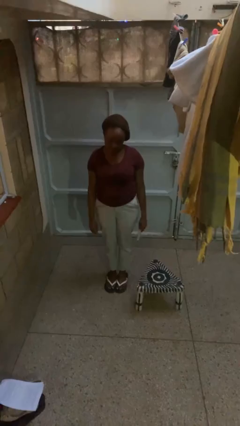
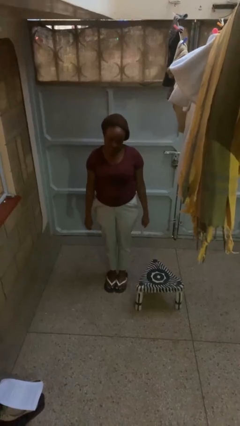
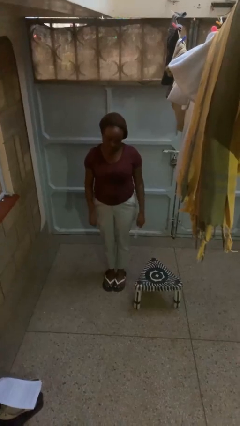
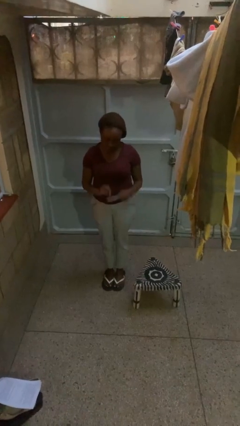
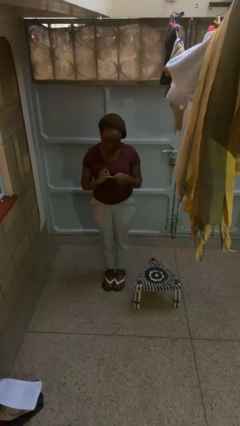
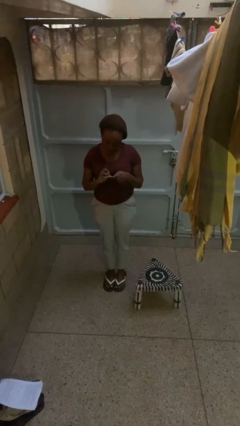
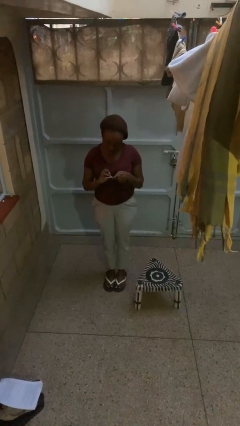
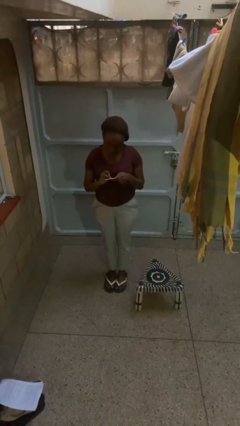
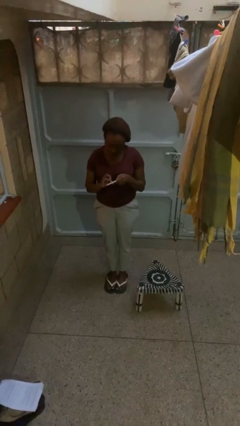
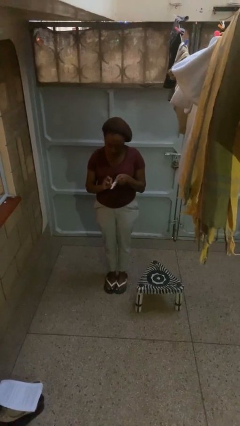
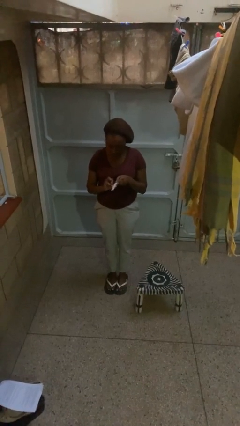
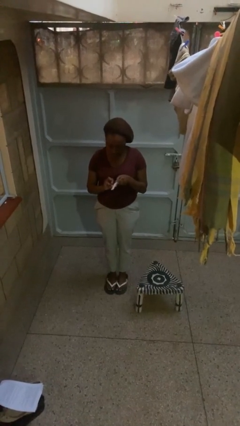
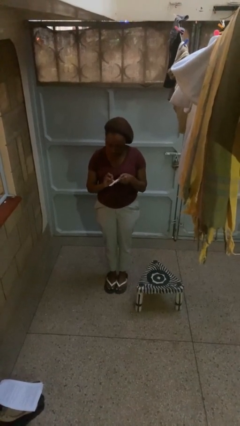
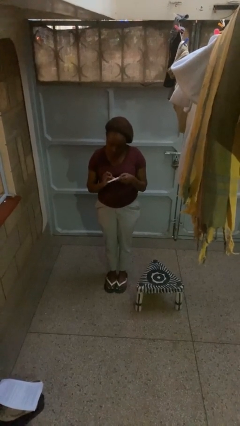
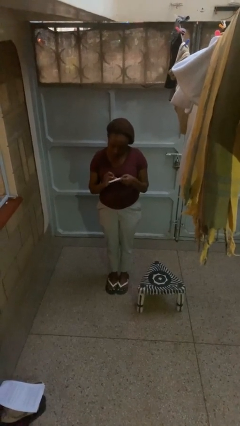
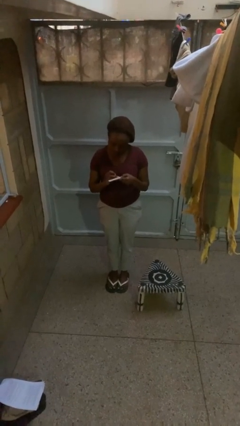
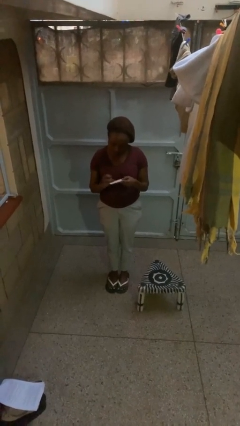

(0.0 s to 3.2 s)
person files fingernails

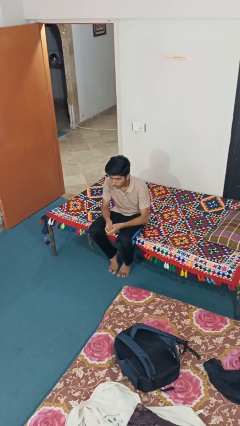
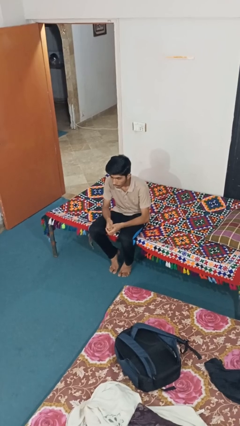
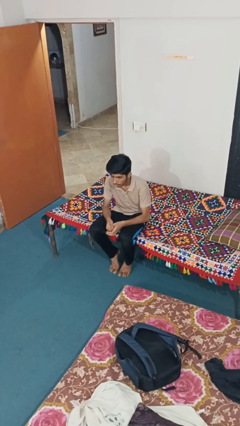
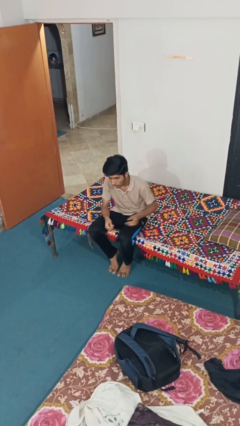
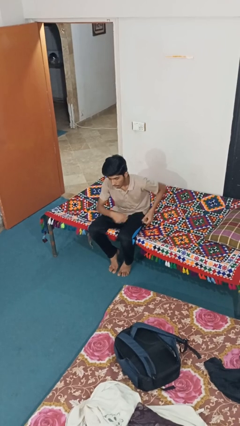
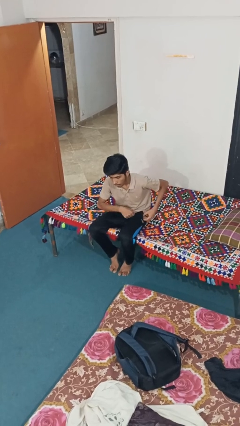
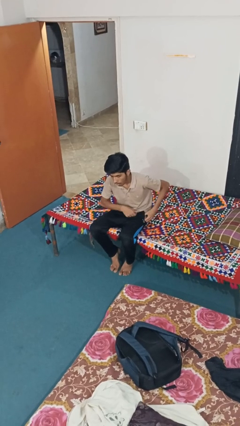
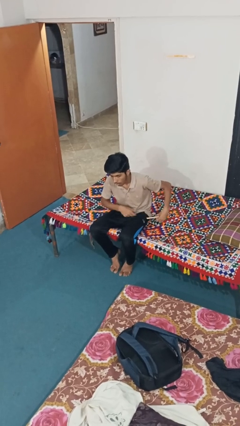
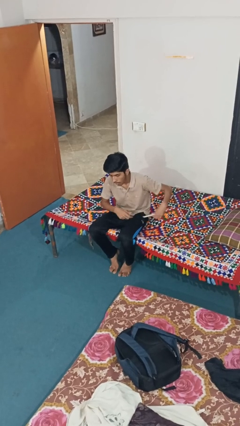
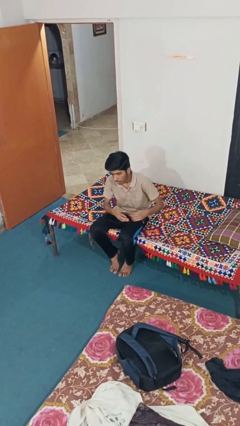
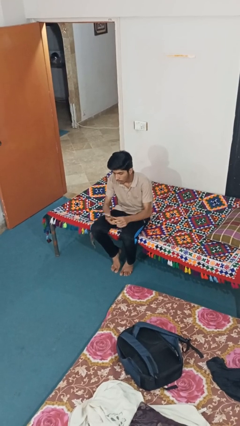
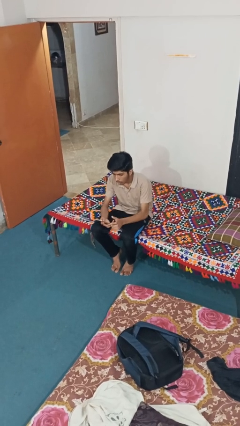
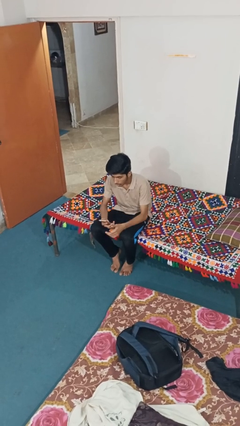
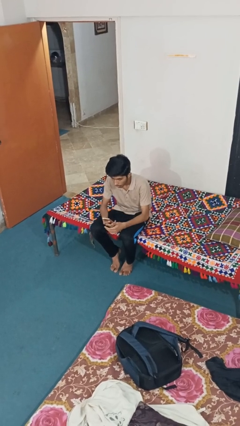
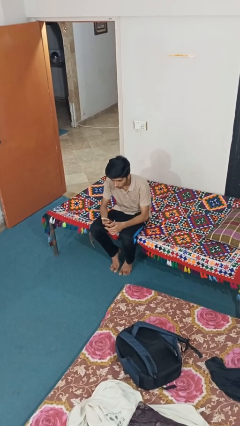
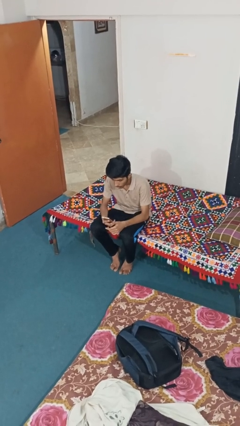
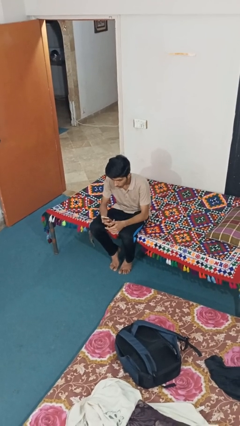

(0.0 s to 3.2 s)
person takes phone from pocket

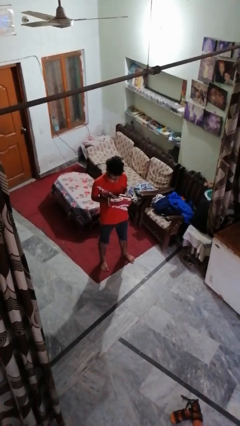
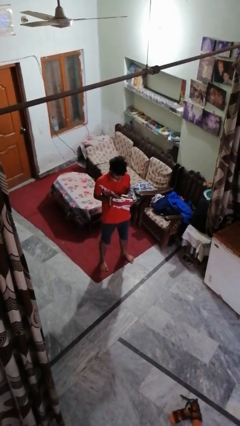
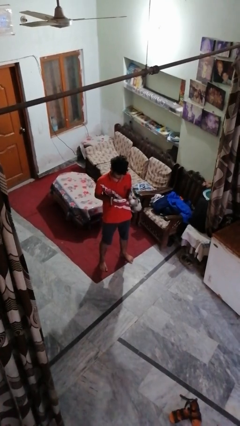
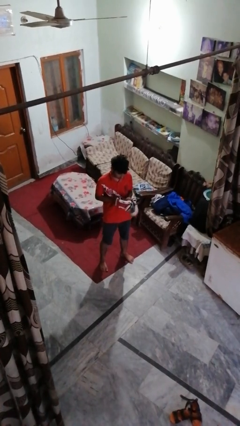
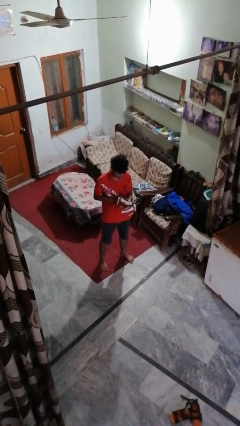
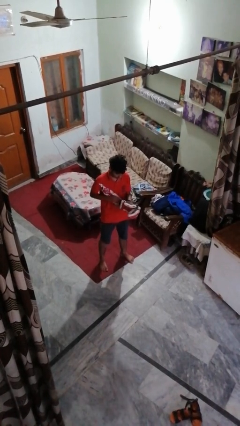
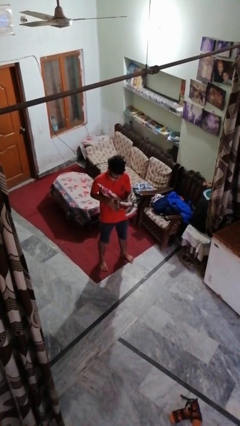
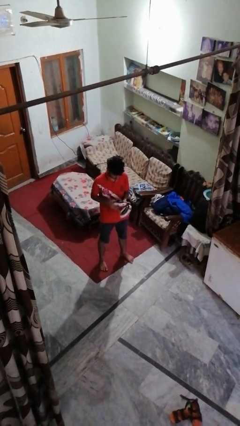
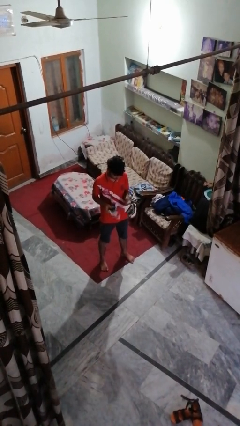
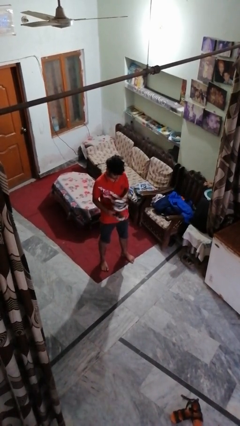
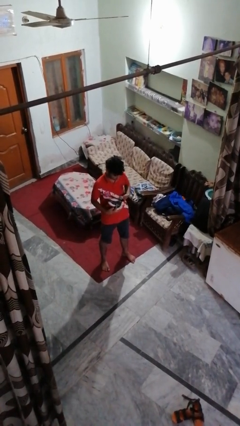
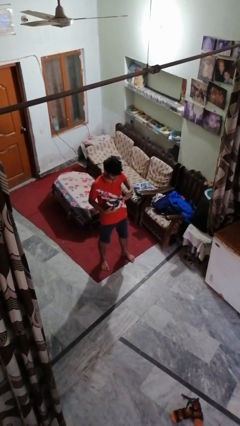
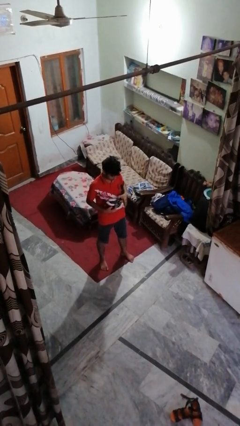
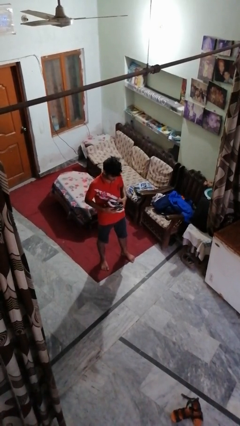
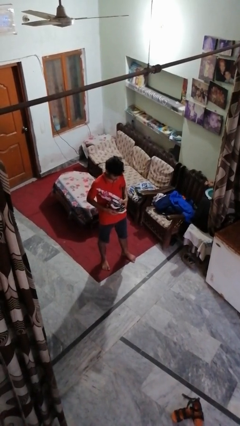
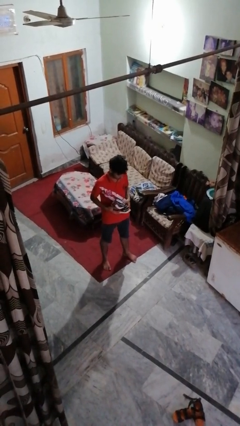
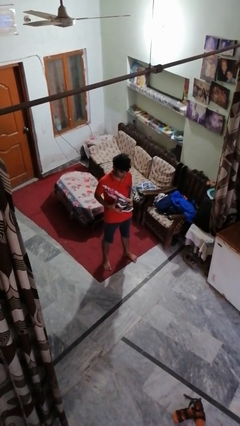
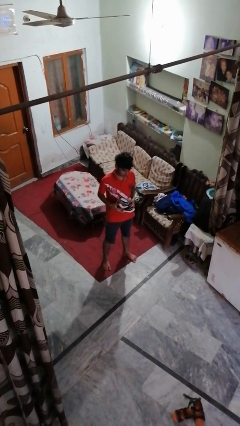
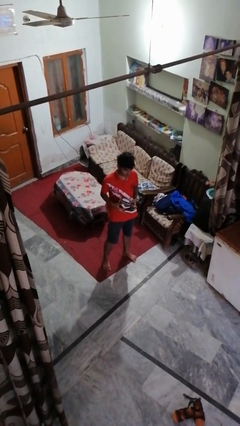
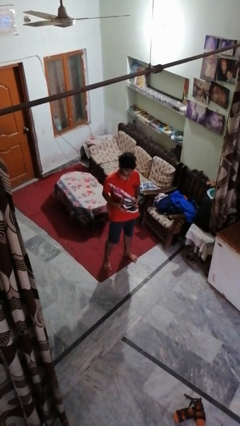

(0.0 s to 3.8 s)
person takes off gloves

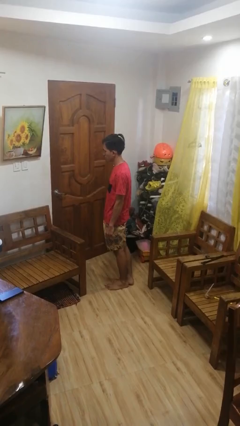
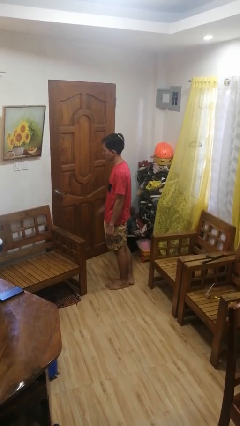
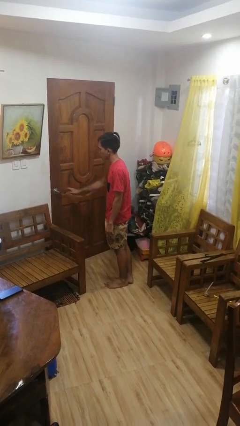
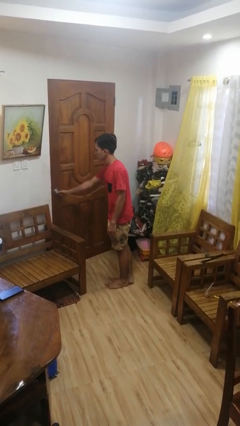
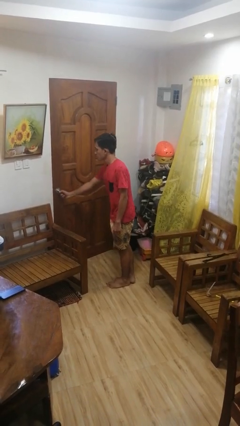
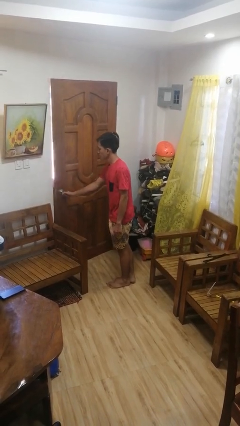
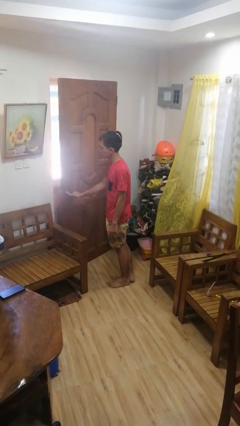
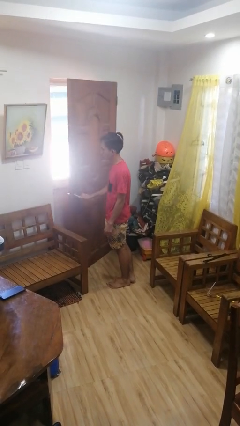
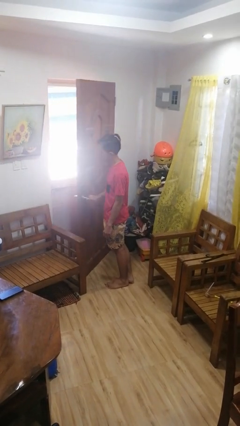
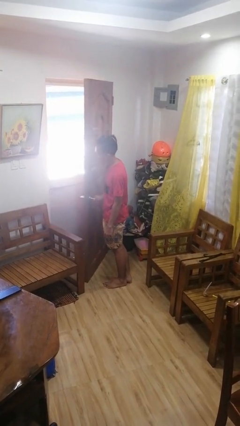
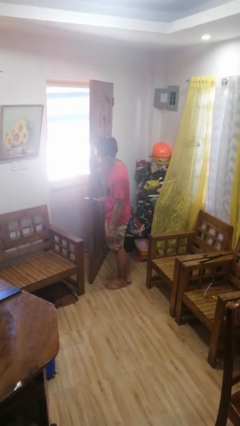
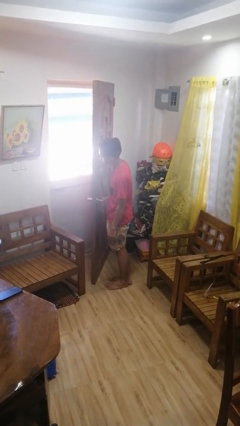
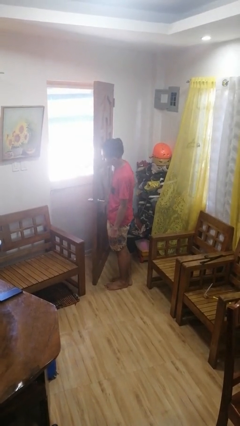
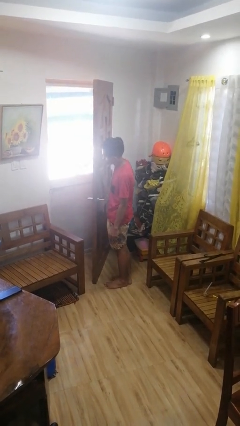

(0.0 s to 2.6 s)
person opens facility door

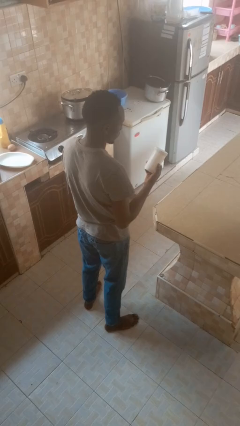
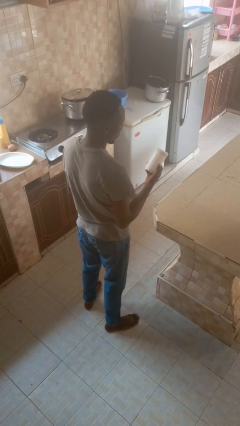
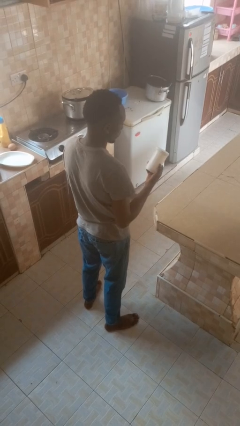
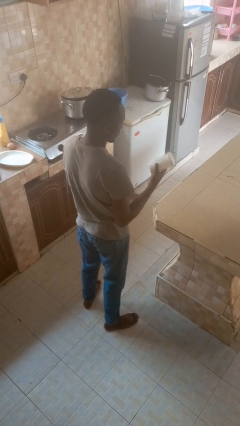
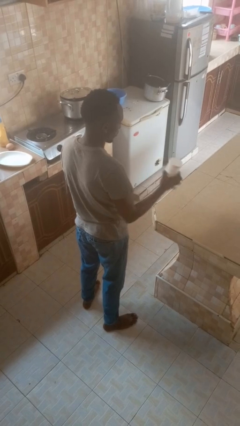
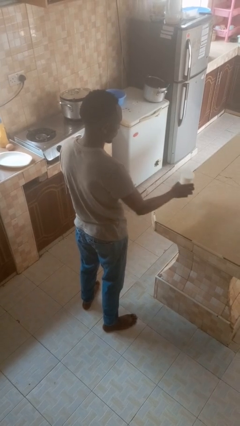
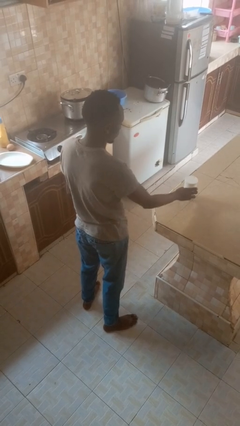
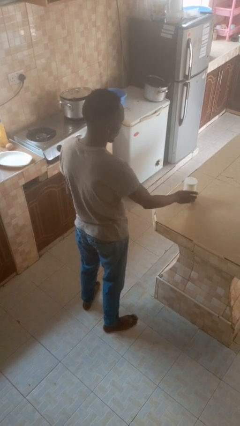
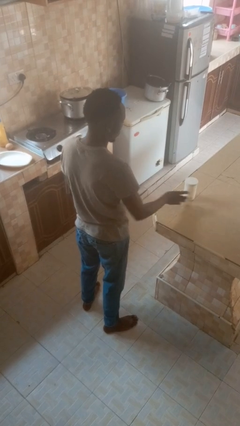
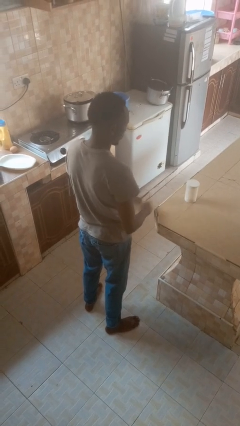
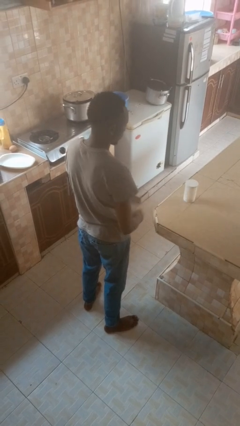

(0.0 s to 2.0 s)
person puts down object on countertop

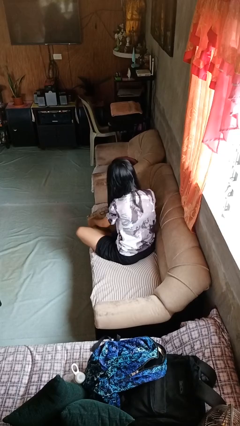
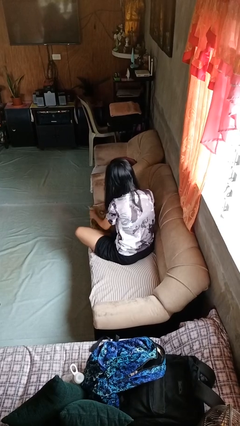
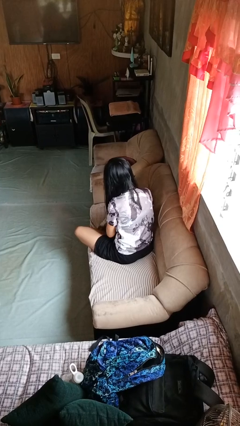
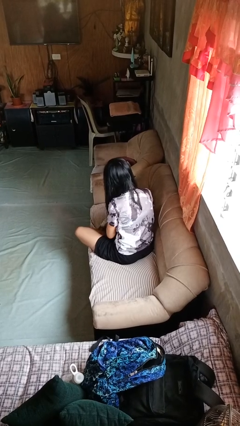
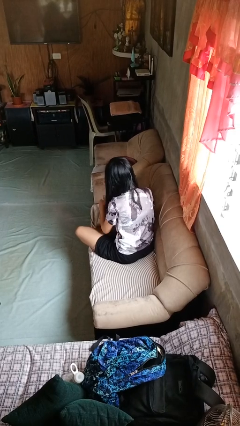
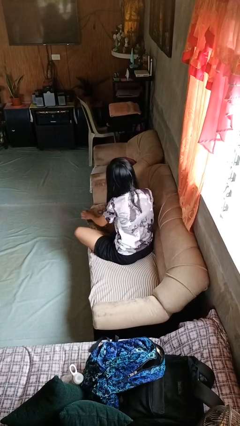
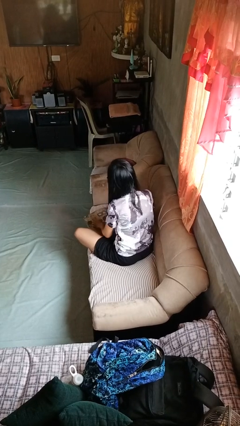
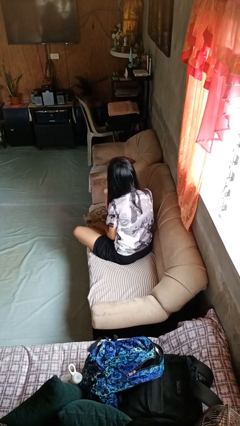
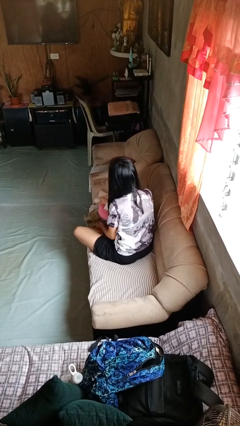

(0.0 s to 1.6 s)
person searches in couch

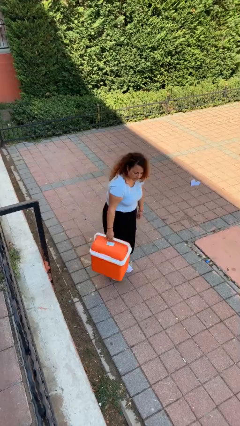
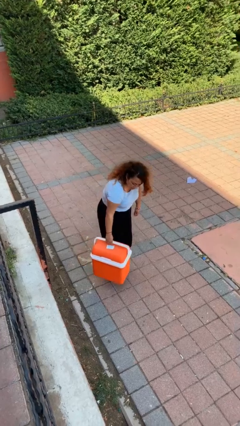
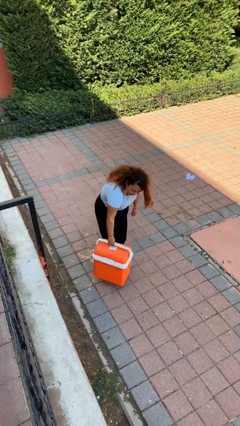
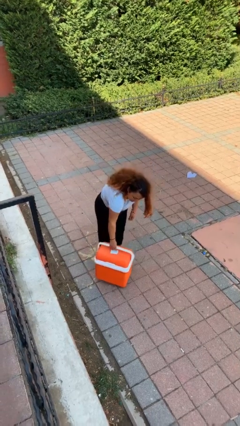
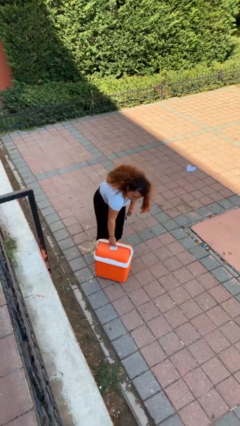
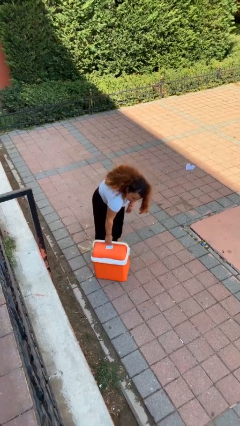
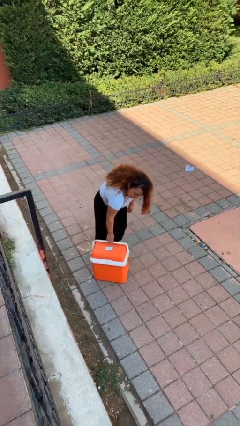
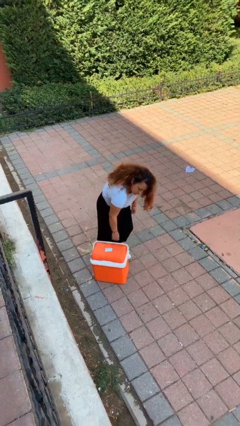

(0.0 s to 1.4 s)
person puts down object on floor
